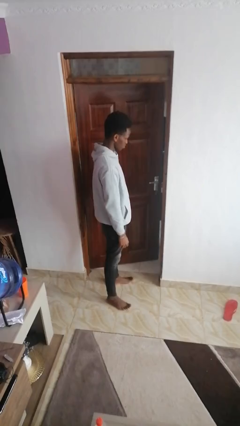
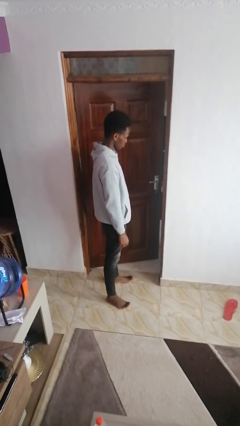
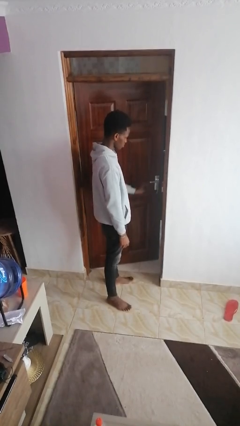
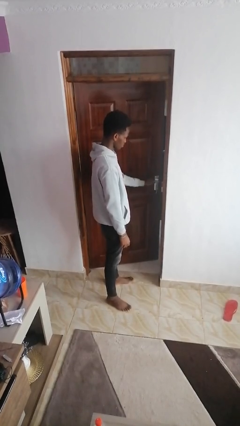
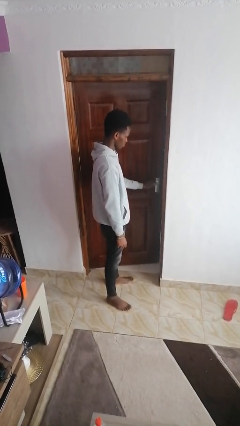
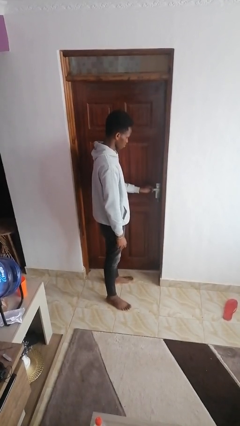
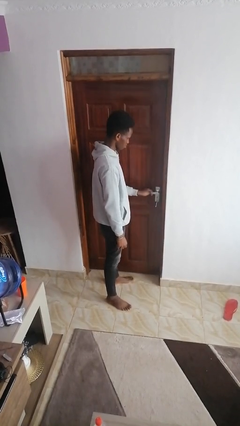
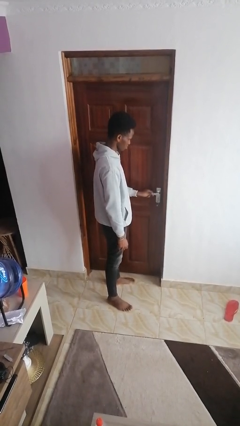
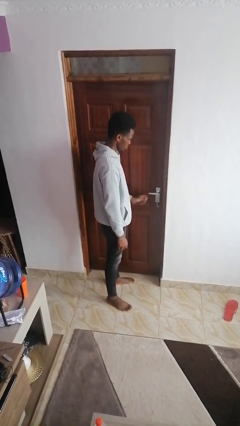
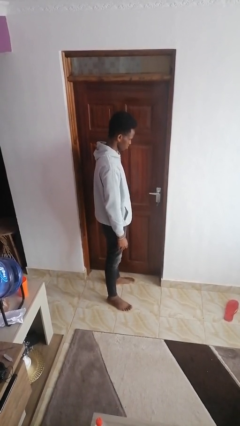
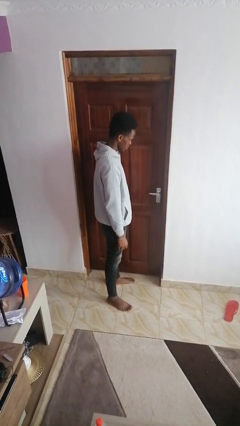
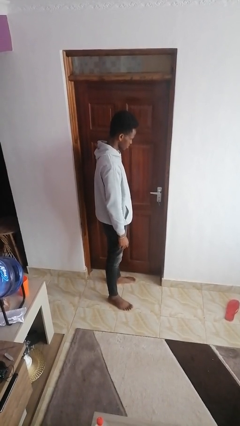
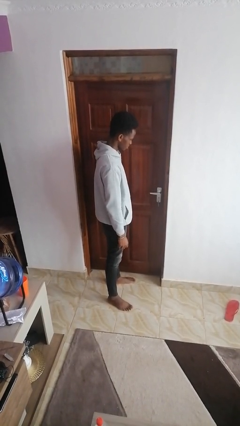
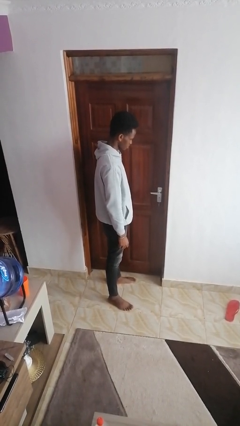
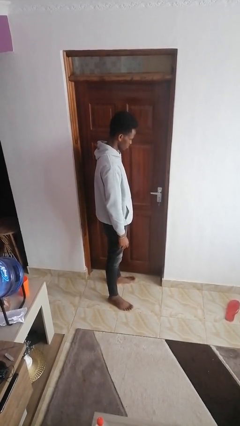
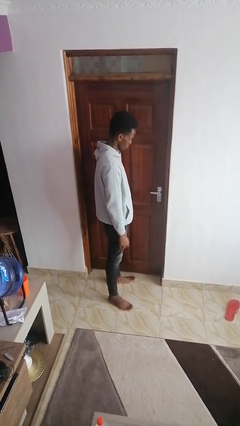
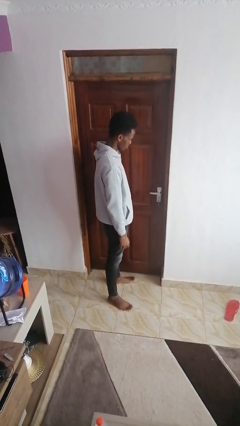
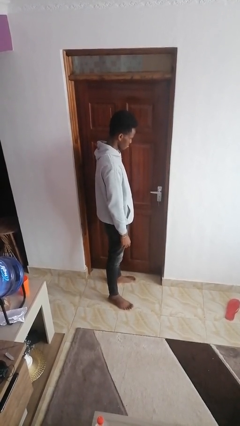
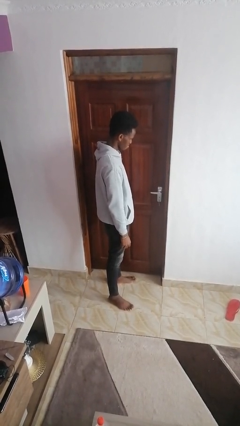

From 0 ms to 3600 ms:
person closes facility door

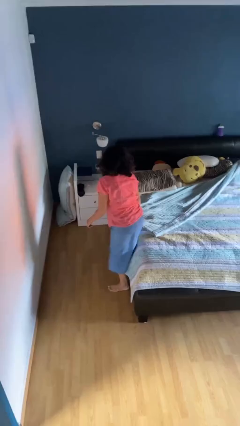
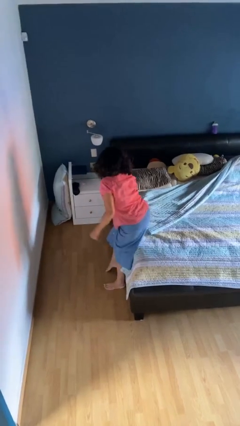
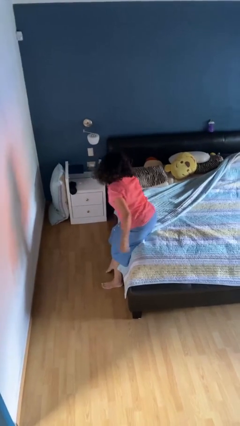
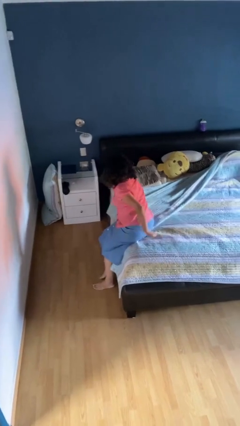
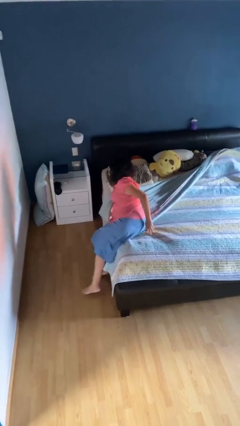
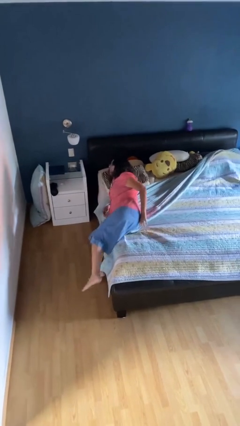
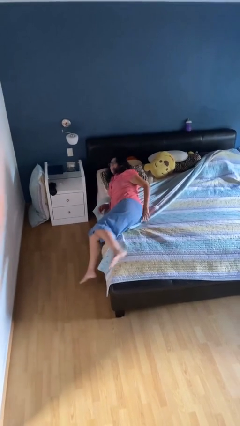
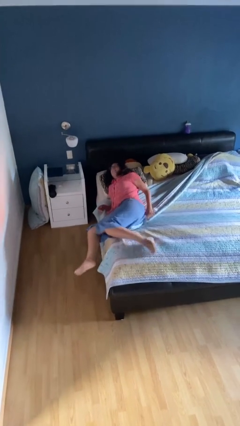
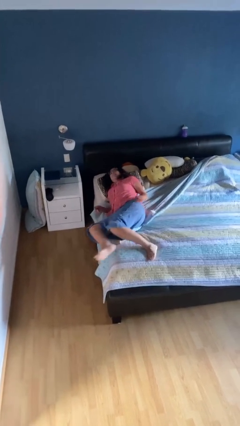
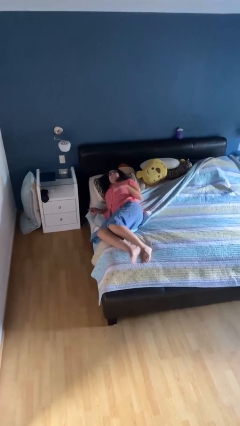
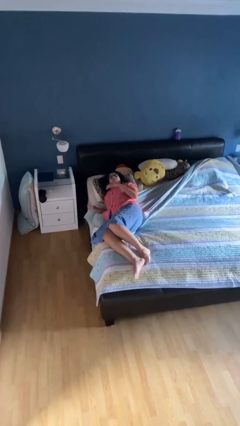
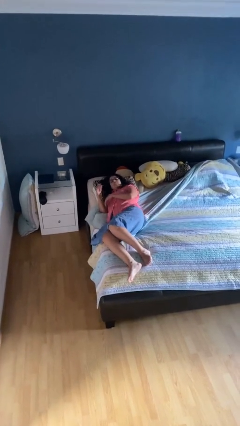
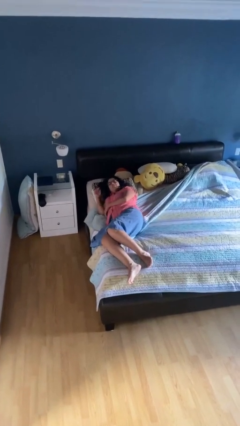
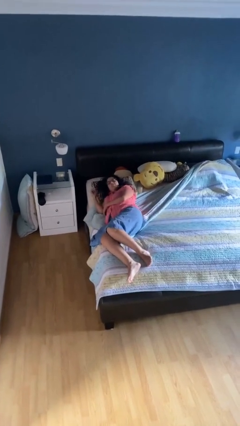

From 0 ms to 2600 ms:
person lies down on bed

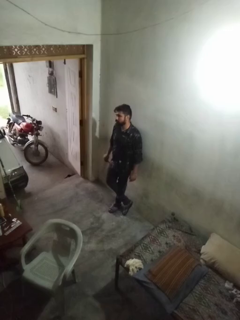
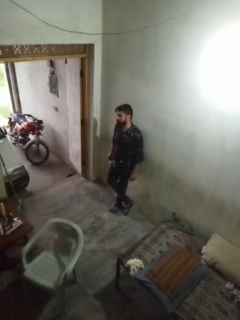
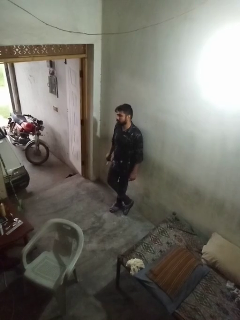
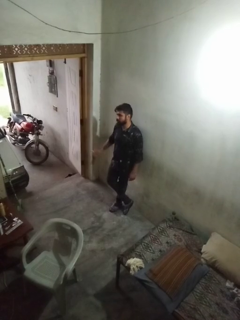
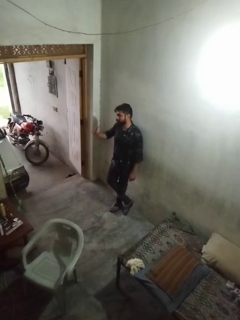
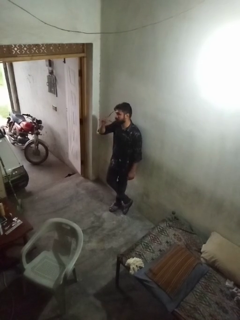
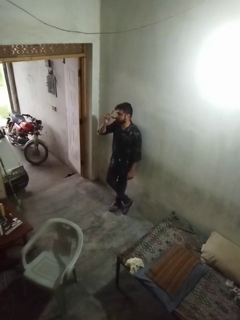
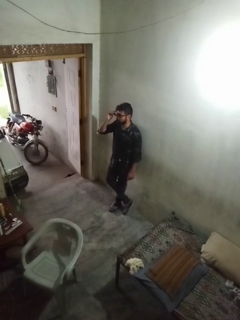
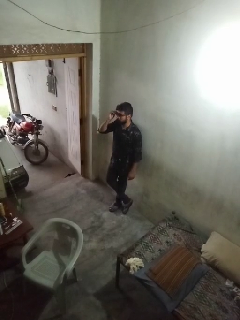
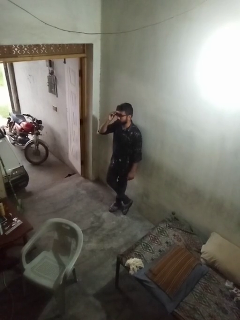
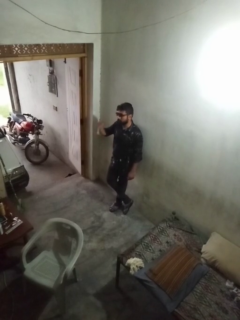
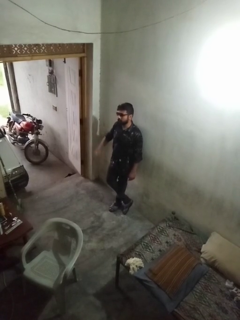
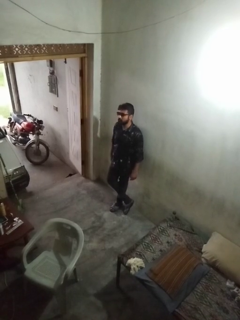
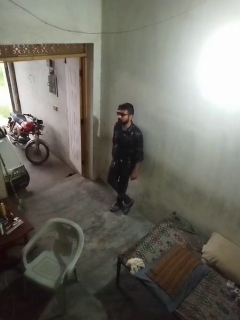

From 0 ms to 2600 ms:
person puts on sunglasses

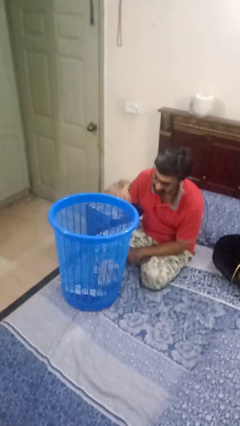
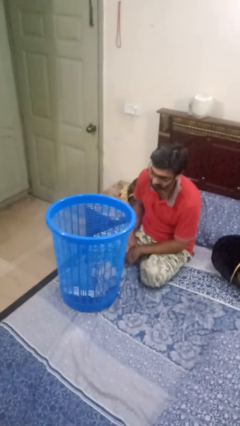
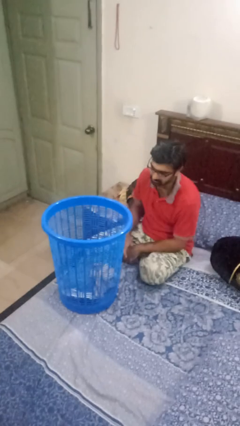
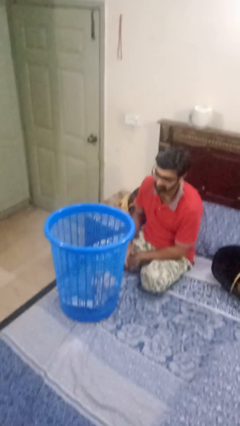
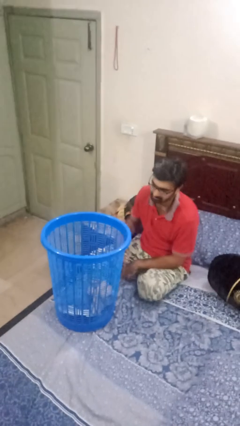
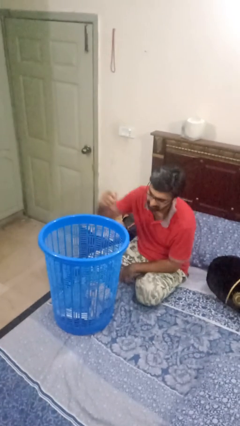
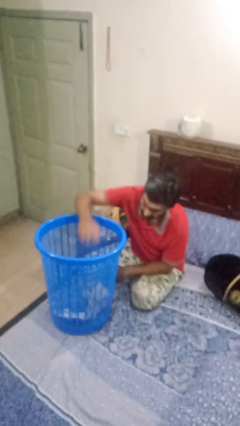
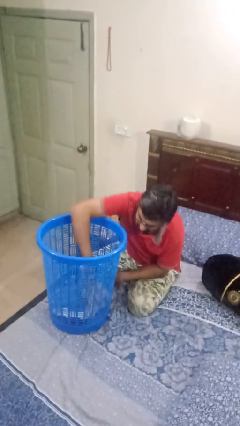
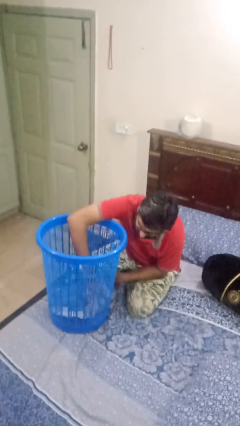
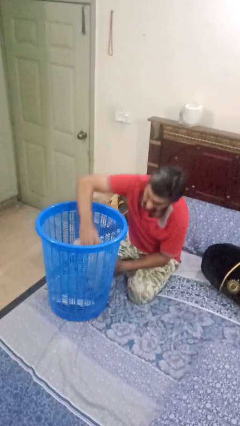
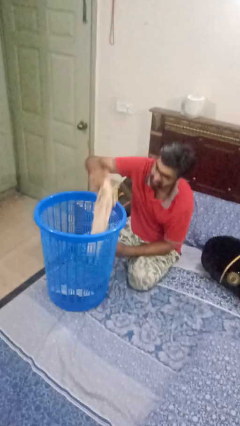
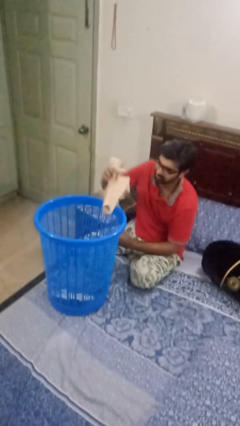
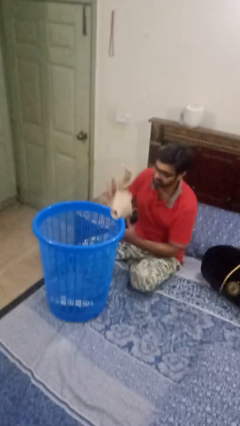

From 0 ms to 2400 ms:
person takes object from basket

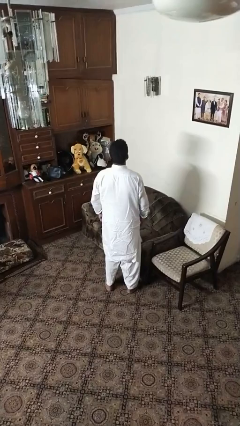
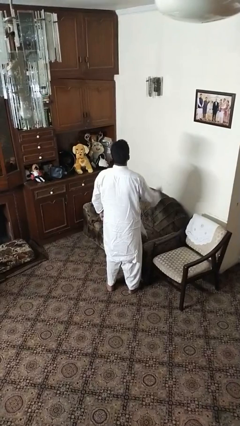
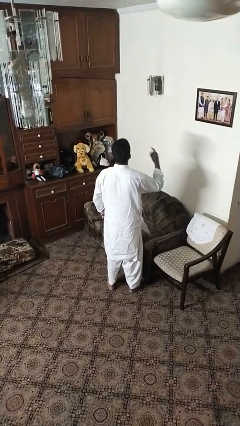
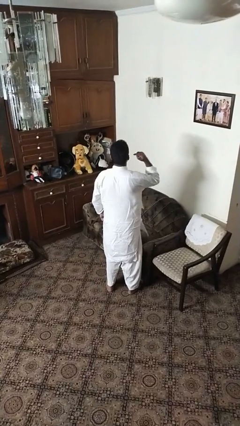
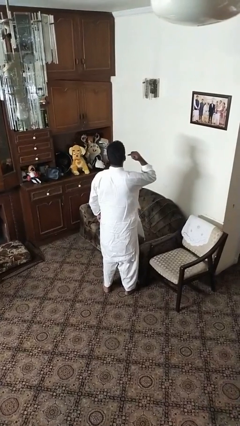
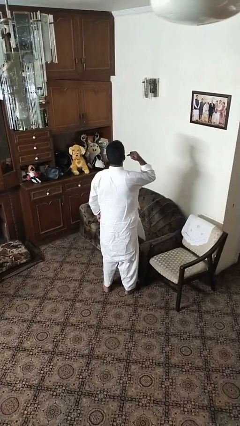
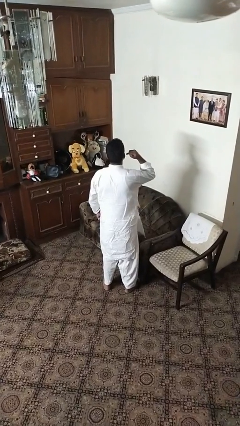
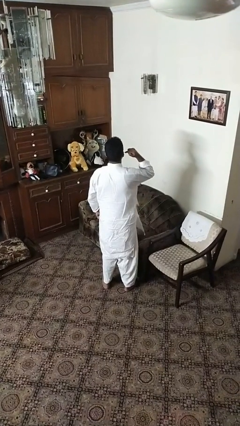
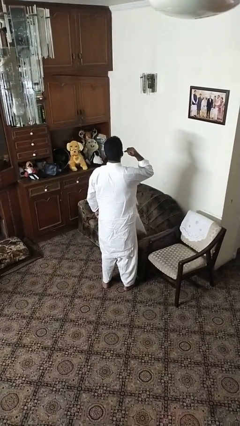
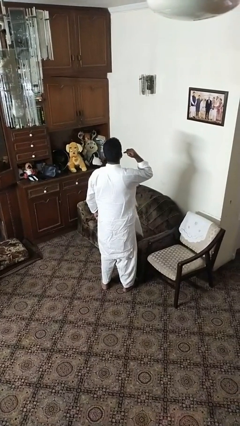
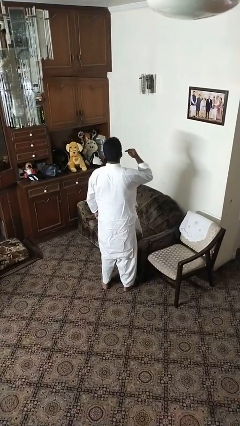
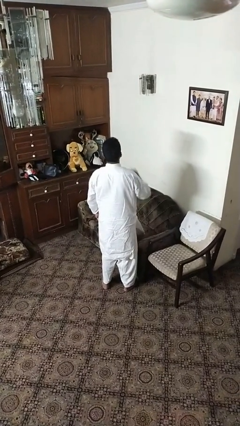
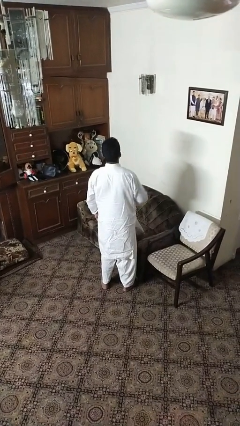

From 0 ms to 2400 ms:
person gestures listen closely

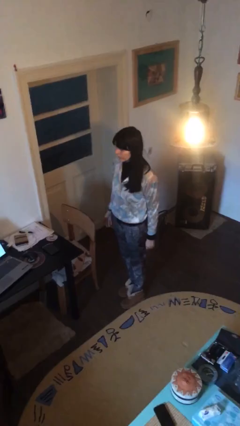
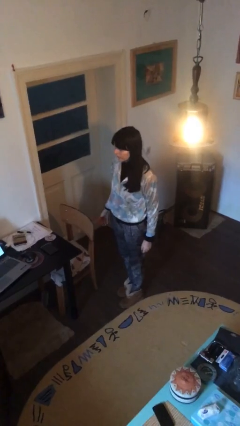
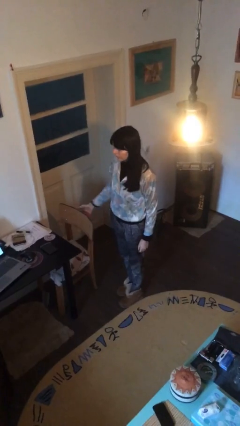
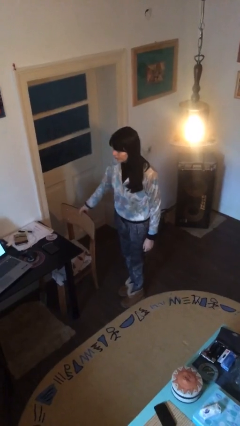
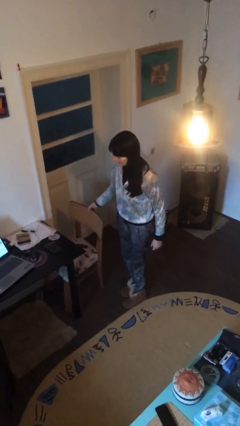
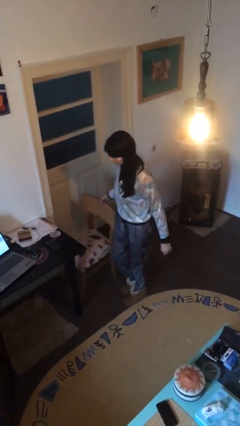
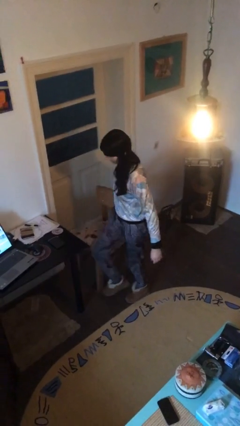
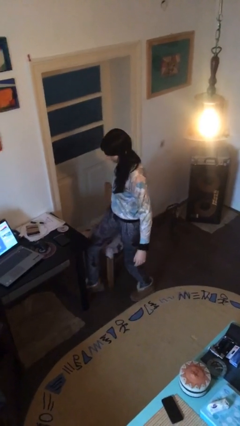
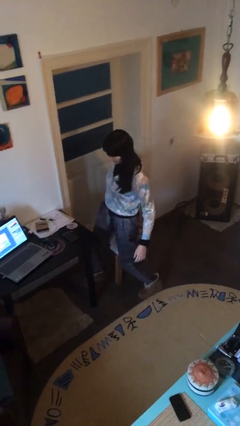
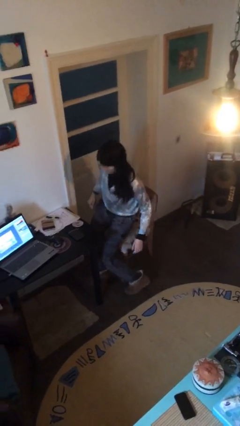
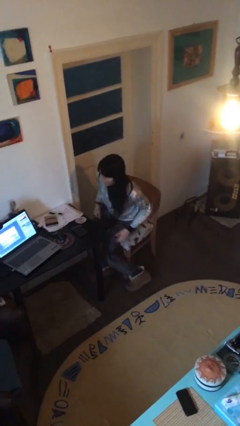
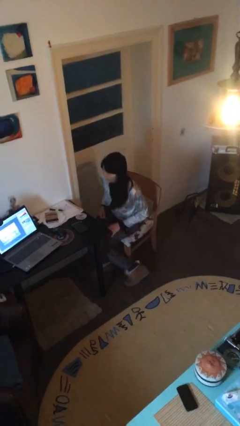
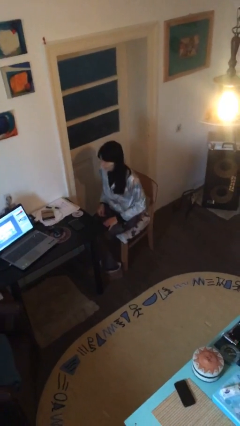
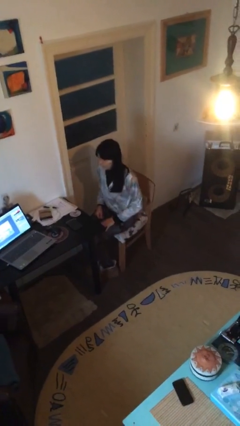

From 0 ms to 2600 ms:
person sits down

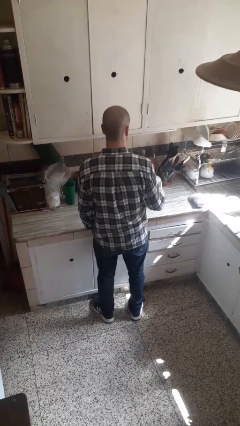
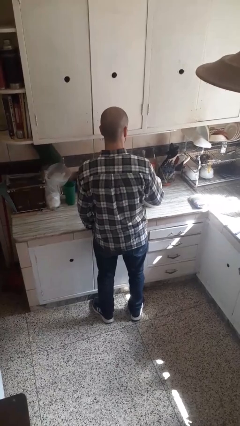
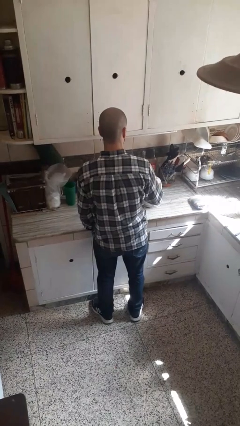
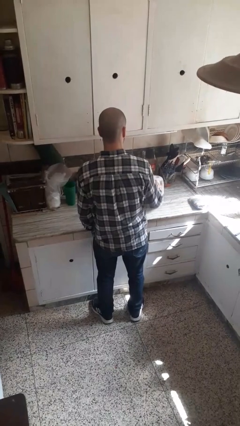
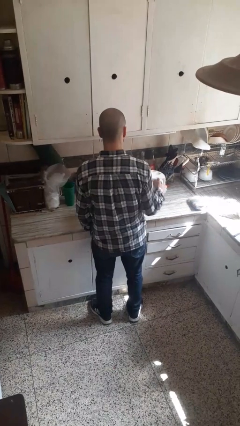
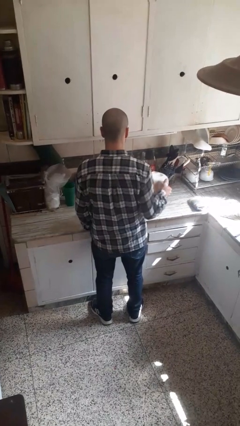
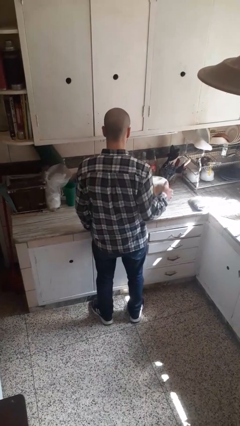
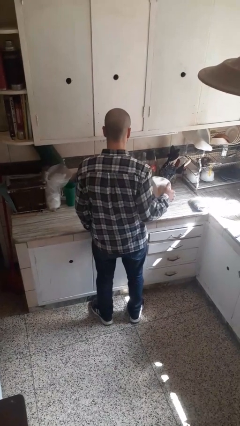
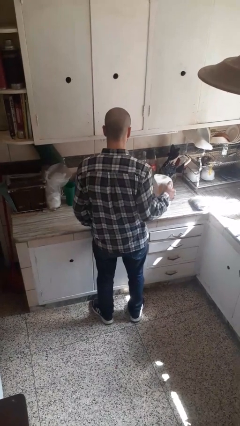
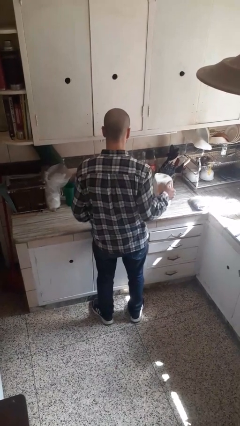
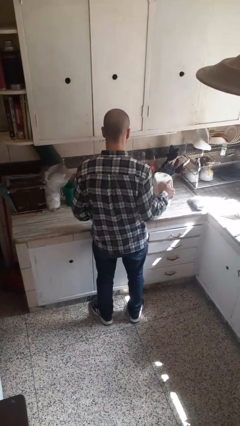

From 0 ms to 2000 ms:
person picks up object from countertop
